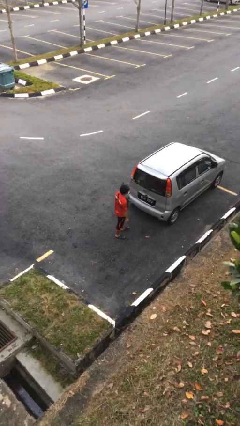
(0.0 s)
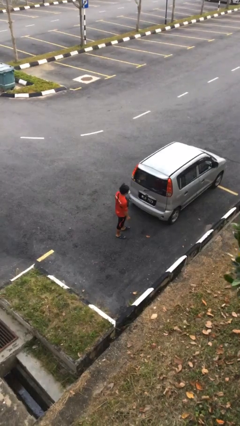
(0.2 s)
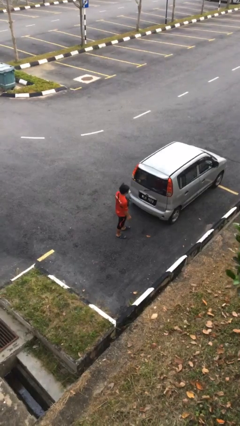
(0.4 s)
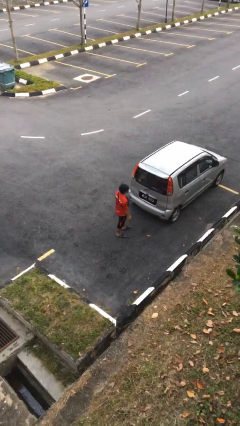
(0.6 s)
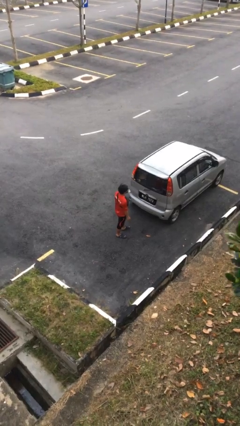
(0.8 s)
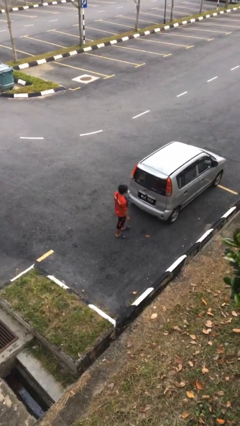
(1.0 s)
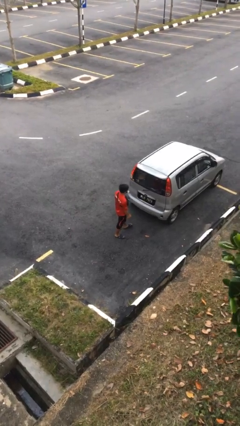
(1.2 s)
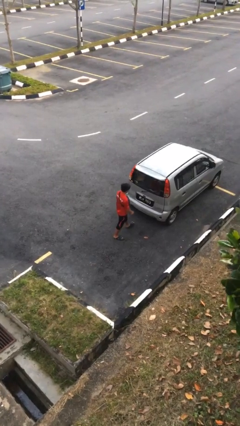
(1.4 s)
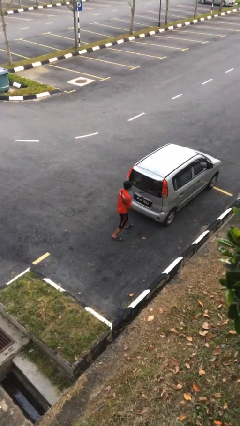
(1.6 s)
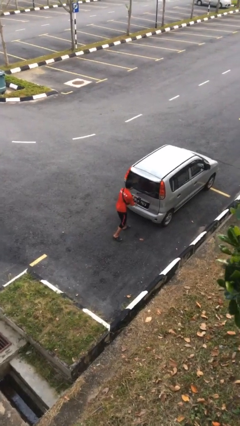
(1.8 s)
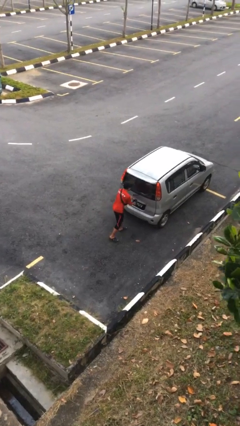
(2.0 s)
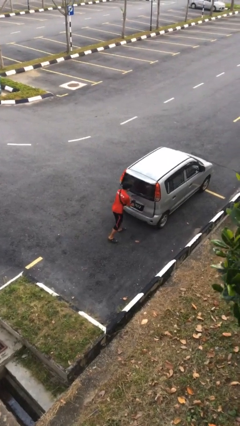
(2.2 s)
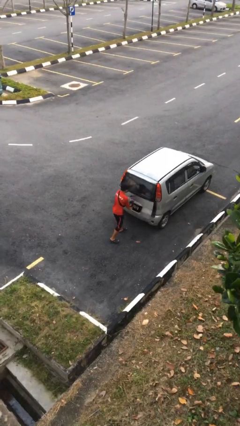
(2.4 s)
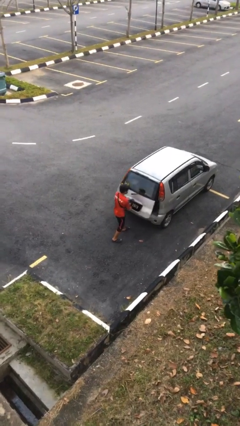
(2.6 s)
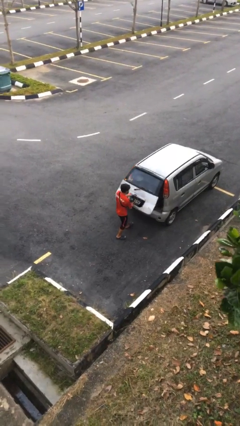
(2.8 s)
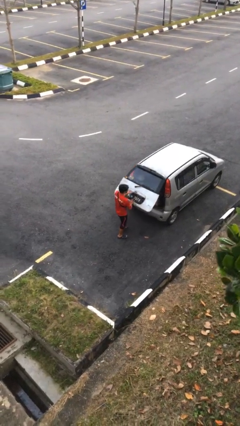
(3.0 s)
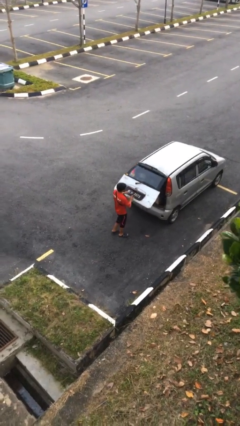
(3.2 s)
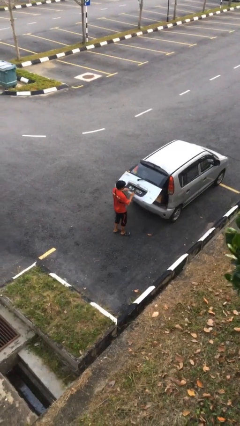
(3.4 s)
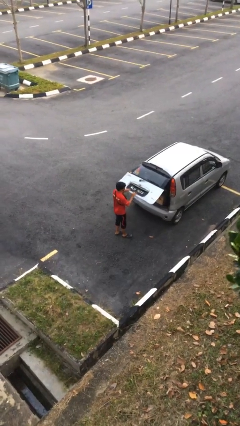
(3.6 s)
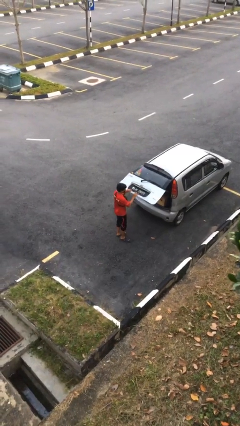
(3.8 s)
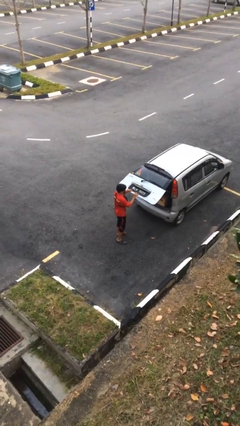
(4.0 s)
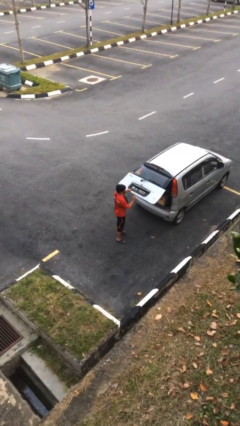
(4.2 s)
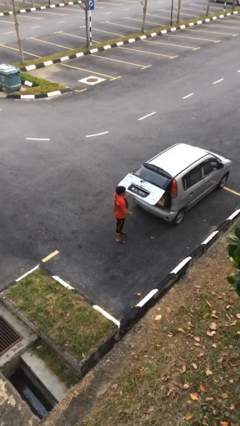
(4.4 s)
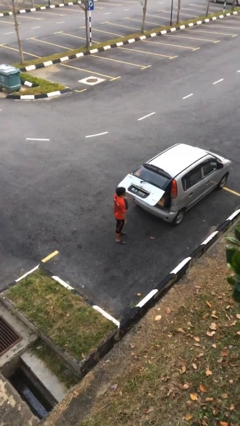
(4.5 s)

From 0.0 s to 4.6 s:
person opens car trunk

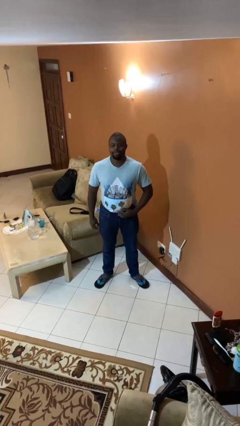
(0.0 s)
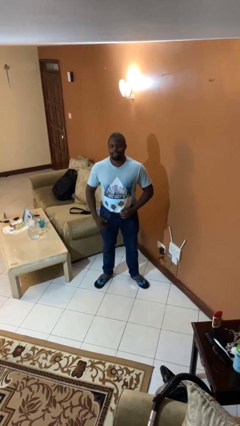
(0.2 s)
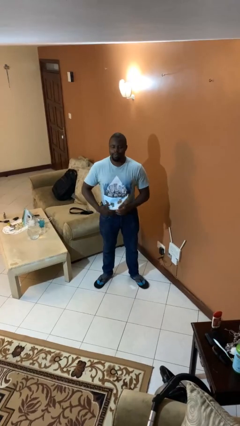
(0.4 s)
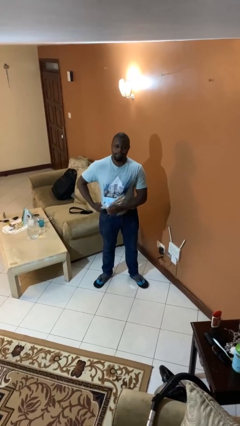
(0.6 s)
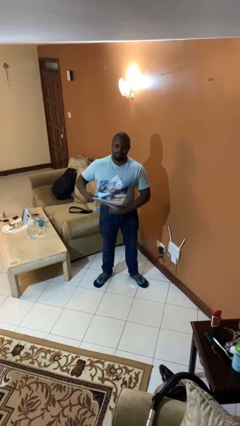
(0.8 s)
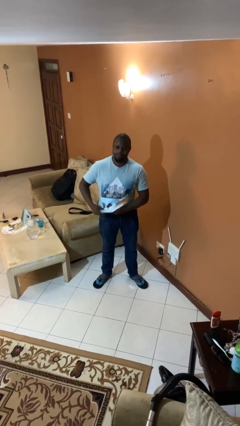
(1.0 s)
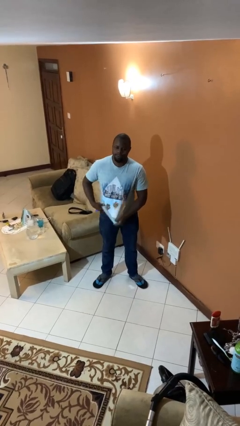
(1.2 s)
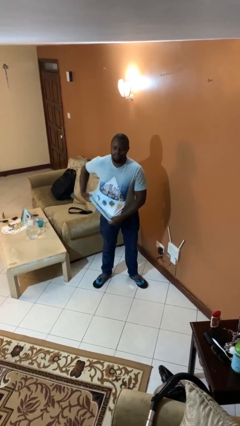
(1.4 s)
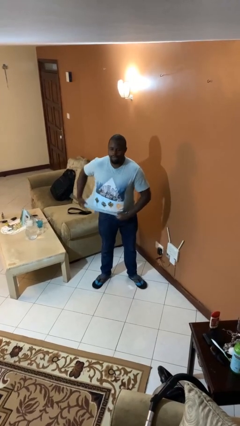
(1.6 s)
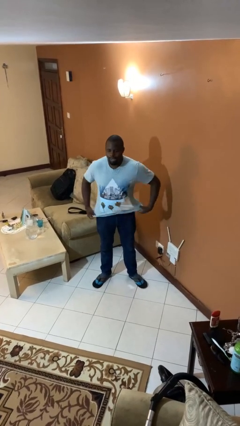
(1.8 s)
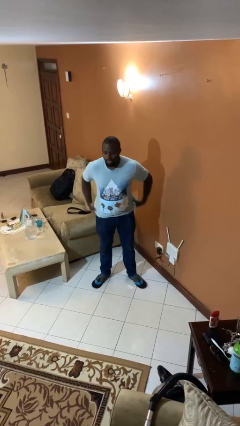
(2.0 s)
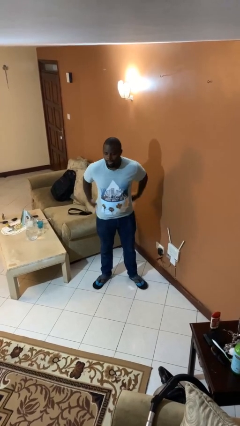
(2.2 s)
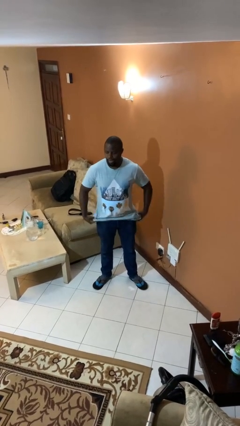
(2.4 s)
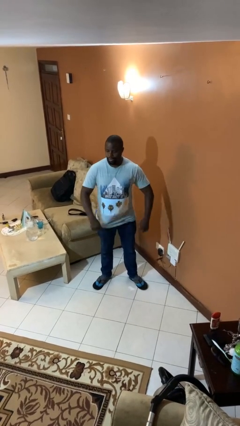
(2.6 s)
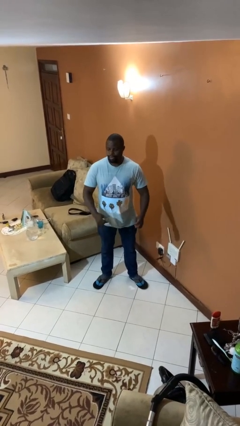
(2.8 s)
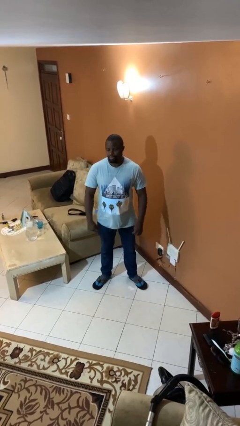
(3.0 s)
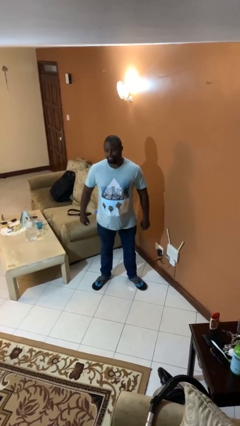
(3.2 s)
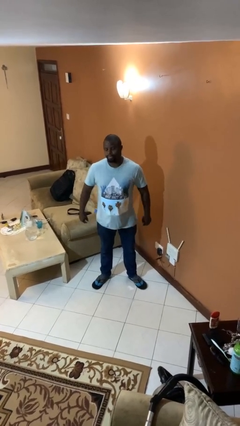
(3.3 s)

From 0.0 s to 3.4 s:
person untucks shirt

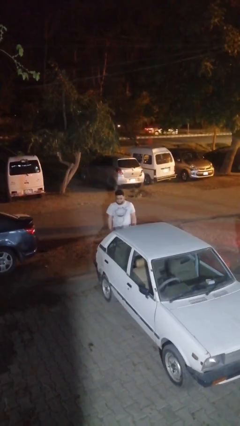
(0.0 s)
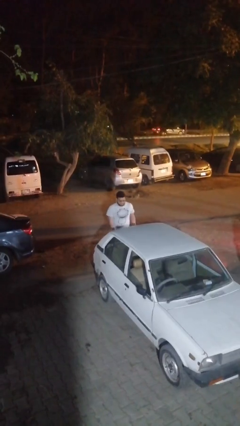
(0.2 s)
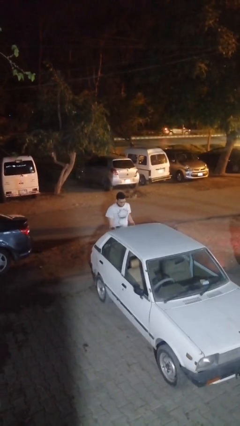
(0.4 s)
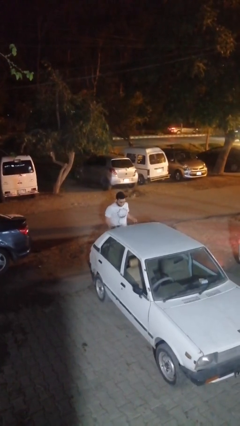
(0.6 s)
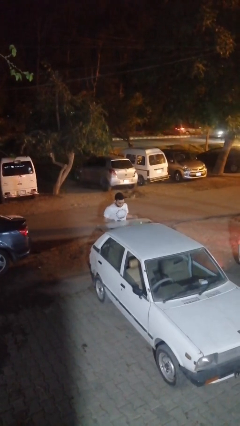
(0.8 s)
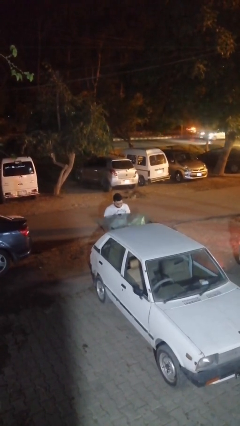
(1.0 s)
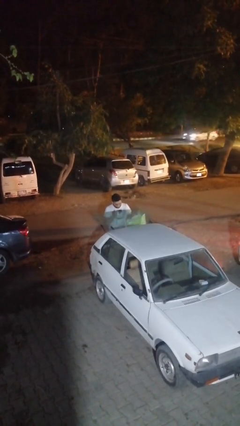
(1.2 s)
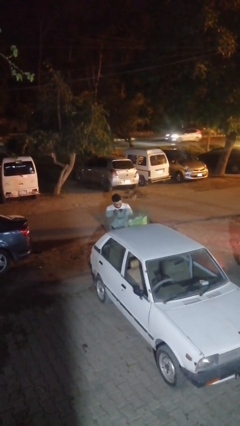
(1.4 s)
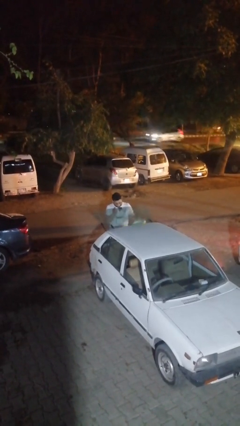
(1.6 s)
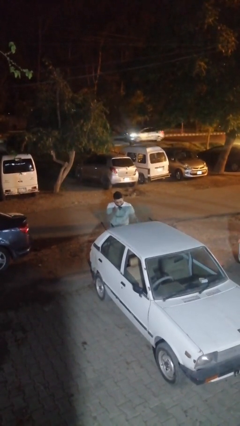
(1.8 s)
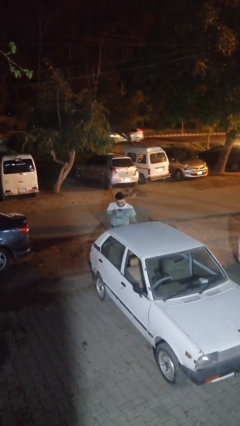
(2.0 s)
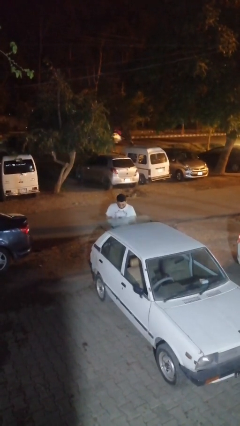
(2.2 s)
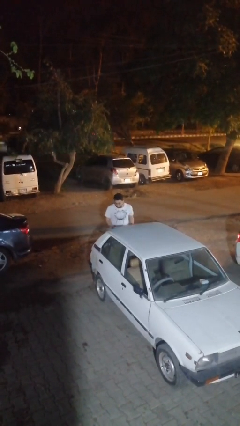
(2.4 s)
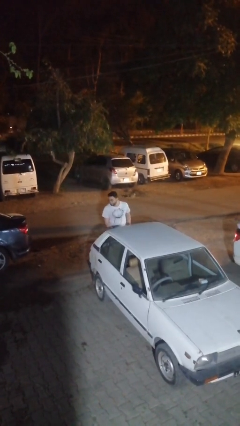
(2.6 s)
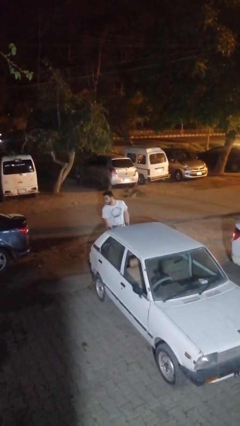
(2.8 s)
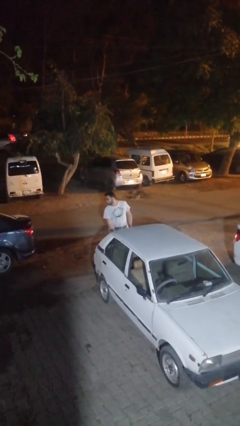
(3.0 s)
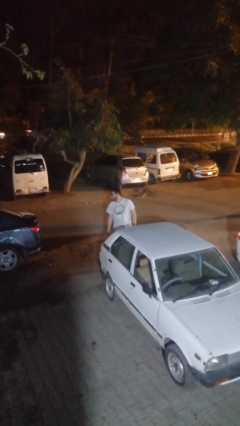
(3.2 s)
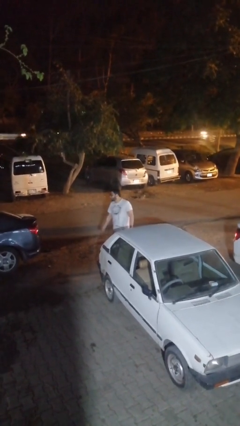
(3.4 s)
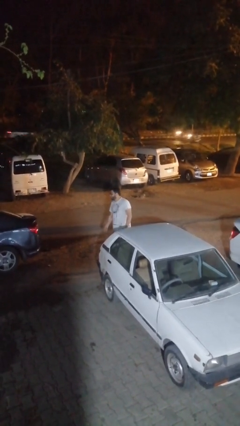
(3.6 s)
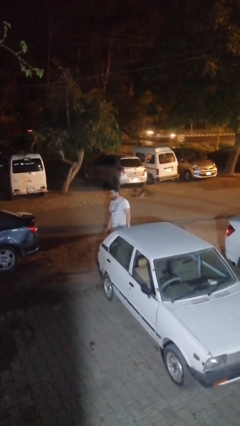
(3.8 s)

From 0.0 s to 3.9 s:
person loads car

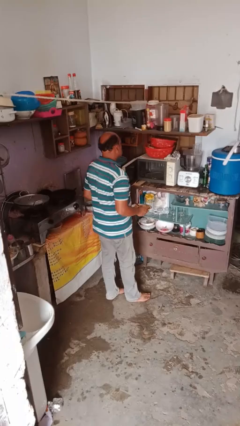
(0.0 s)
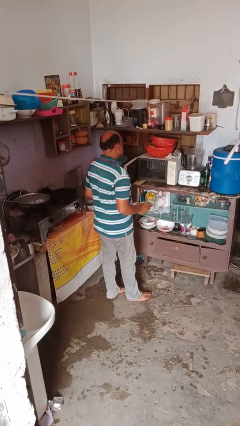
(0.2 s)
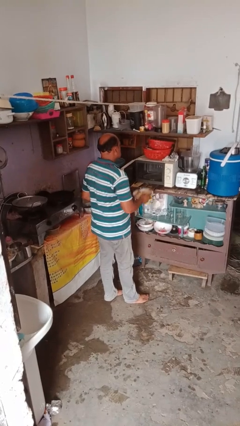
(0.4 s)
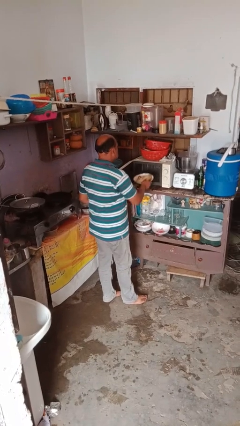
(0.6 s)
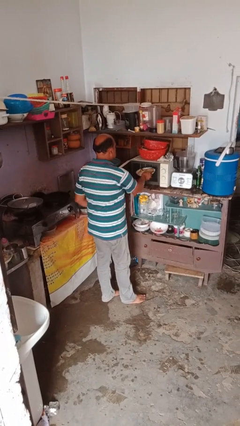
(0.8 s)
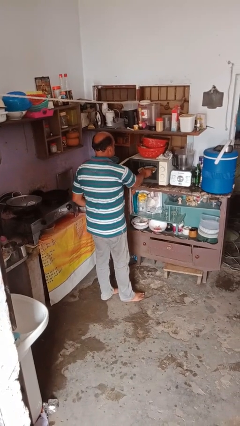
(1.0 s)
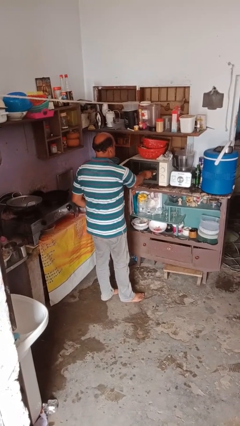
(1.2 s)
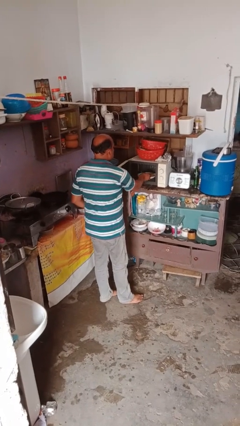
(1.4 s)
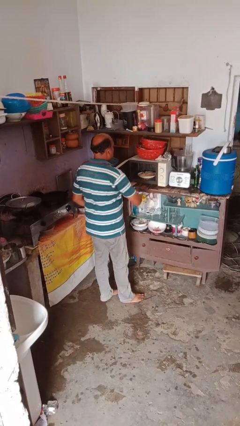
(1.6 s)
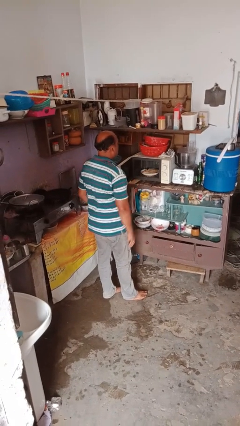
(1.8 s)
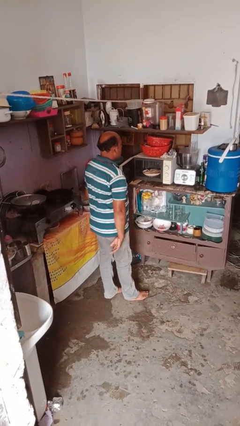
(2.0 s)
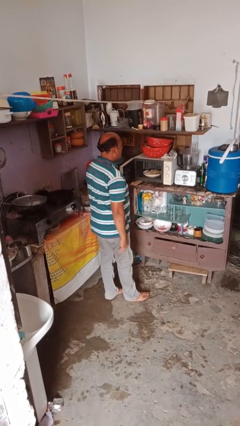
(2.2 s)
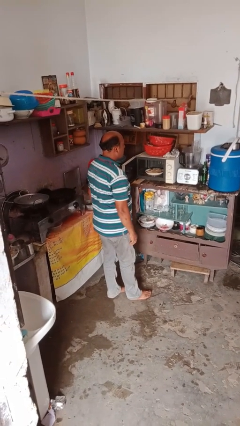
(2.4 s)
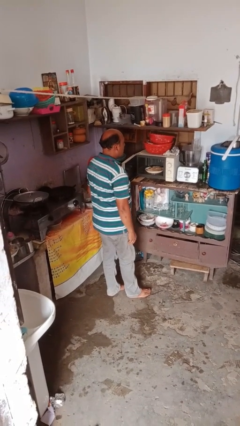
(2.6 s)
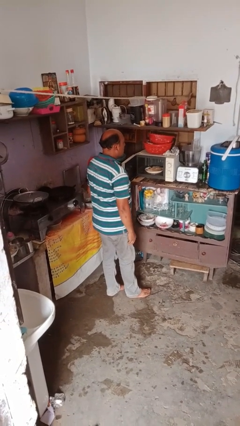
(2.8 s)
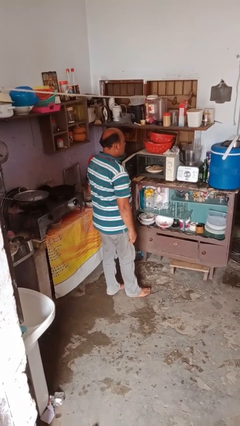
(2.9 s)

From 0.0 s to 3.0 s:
person puts object into microwave

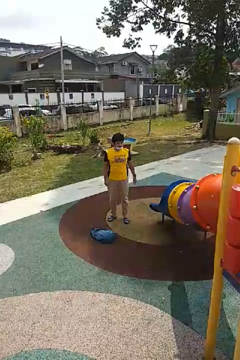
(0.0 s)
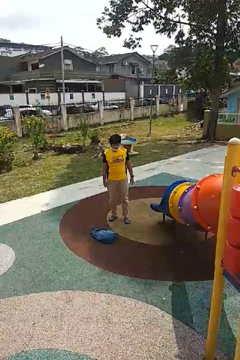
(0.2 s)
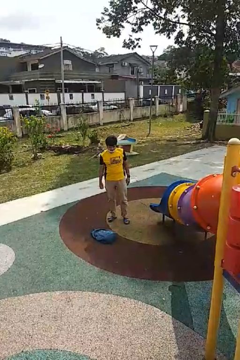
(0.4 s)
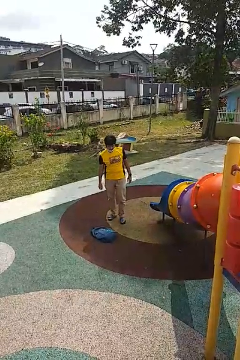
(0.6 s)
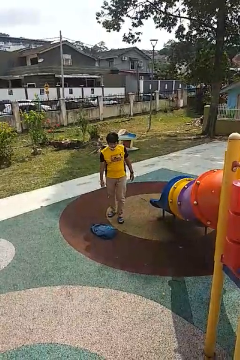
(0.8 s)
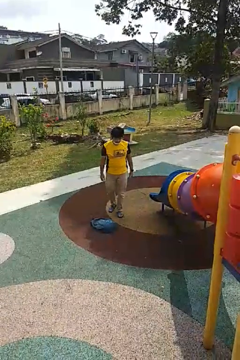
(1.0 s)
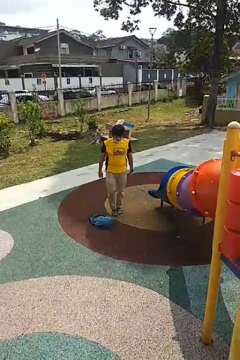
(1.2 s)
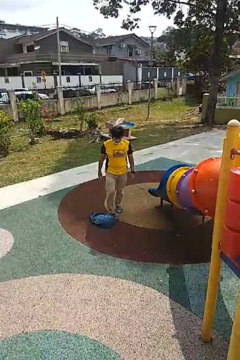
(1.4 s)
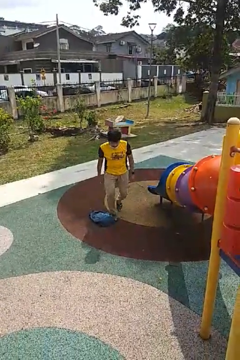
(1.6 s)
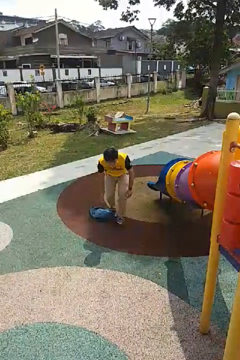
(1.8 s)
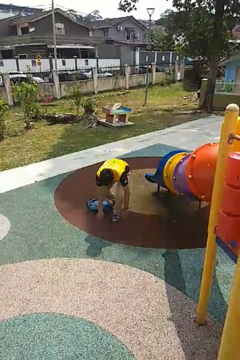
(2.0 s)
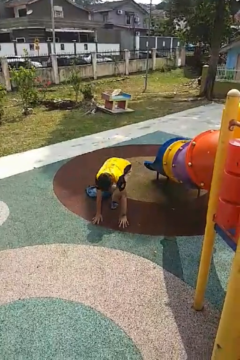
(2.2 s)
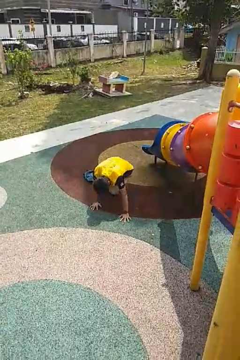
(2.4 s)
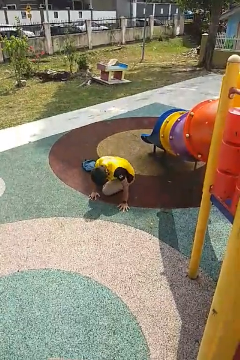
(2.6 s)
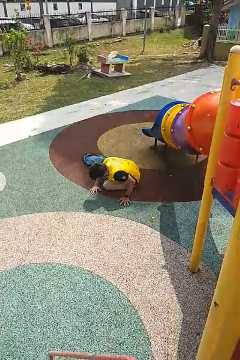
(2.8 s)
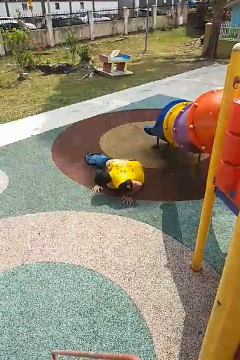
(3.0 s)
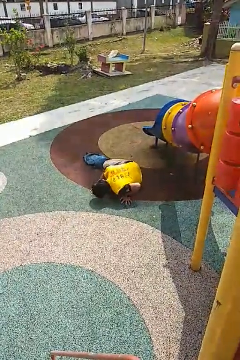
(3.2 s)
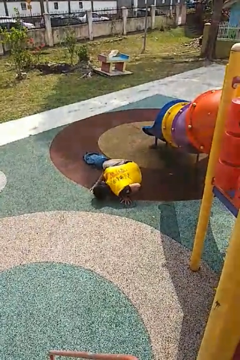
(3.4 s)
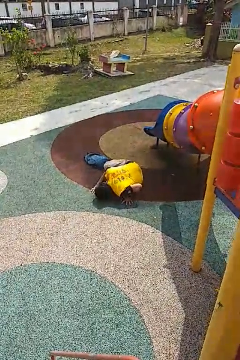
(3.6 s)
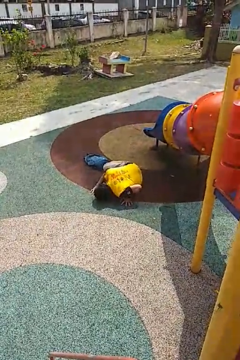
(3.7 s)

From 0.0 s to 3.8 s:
person trips on object on floor
